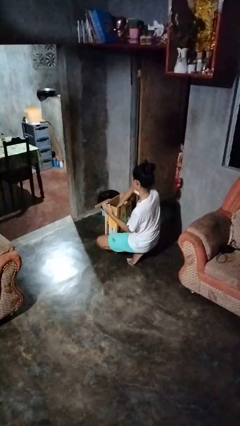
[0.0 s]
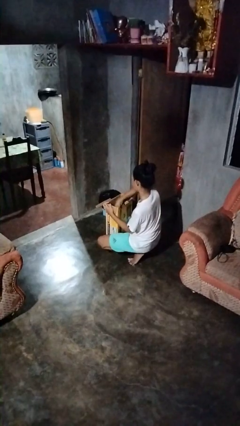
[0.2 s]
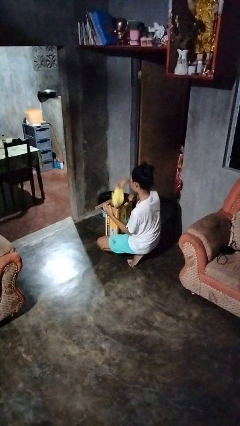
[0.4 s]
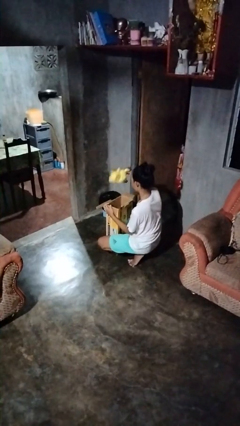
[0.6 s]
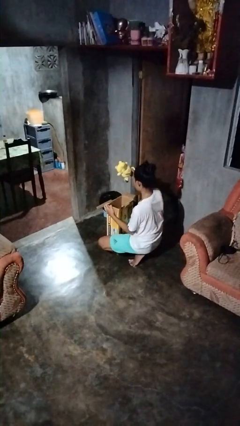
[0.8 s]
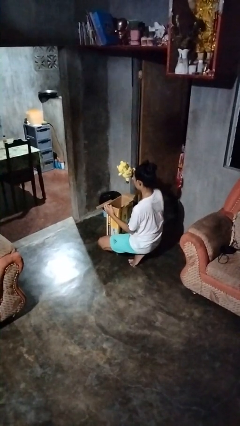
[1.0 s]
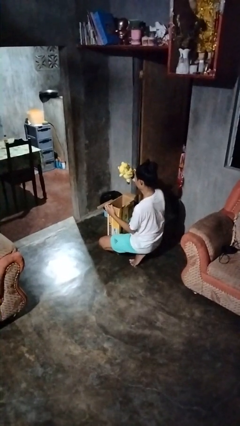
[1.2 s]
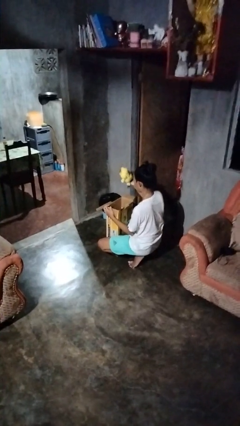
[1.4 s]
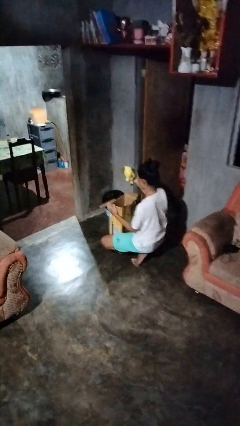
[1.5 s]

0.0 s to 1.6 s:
person takes object from box

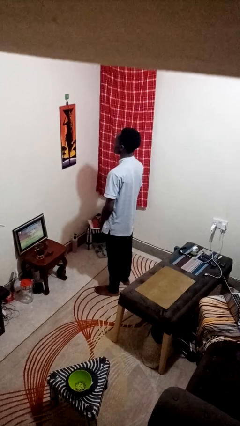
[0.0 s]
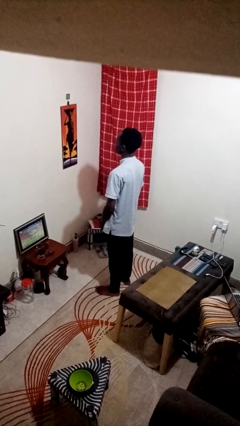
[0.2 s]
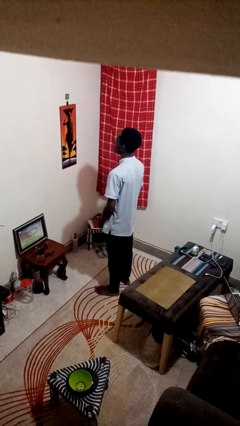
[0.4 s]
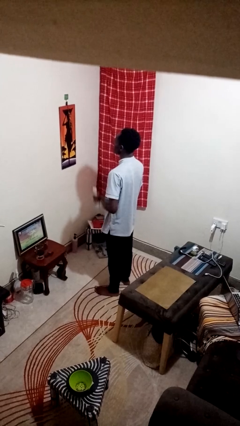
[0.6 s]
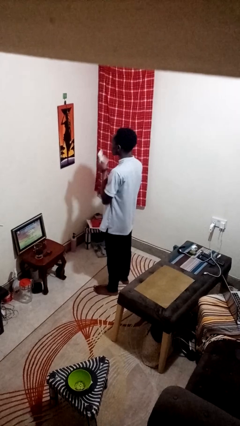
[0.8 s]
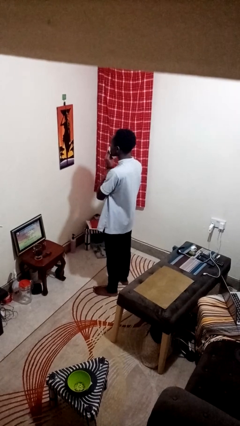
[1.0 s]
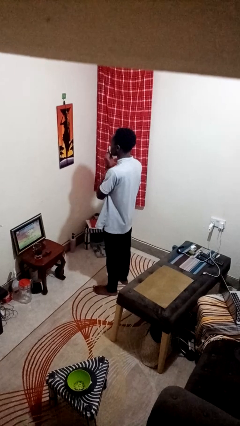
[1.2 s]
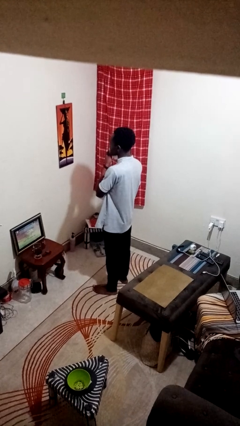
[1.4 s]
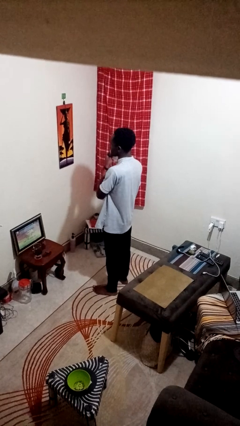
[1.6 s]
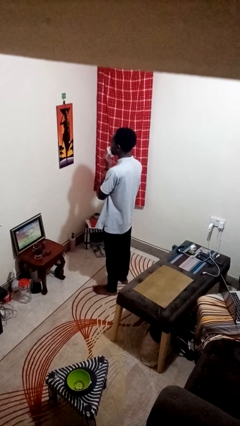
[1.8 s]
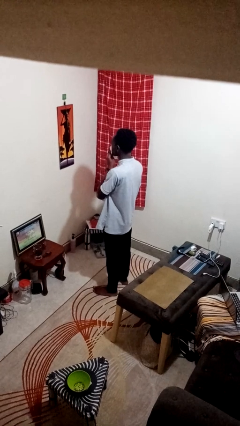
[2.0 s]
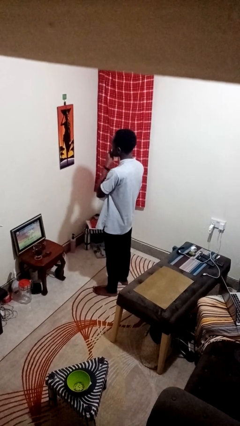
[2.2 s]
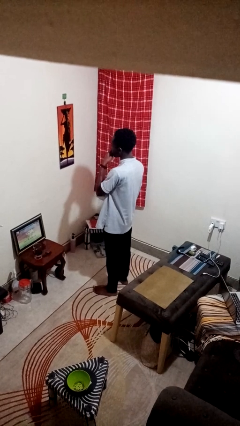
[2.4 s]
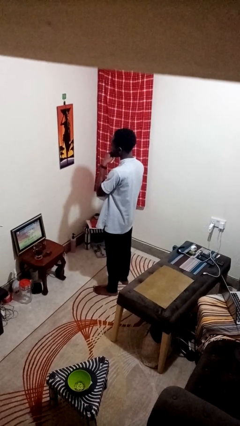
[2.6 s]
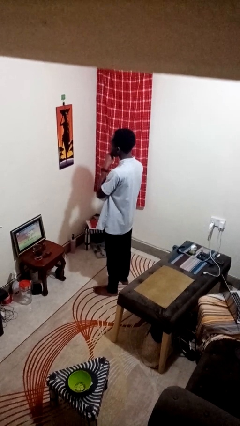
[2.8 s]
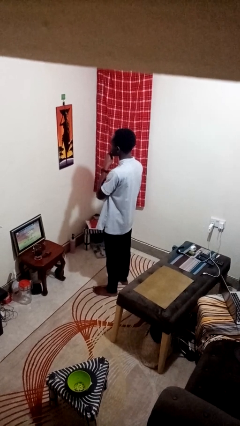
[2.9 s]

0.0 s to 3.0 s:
person wipes mouth with napkin

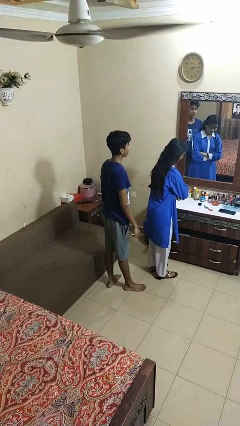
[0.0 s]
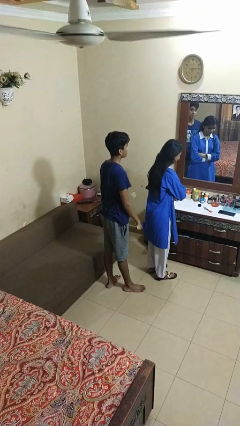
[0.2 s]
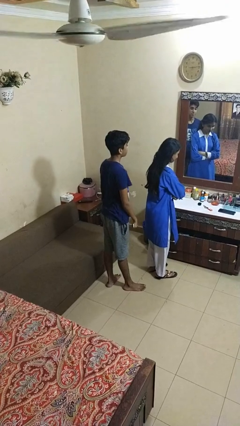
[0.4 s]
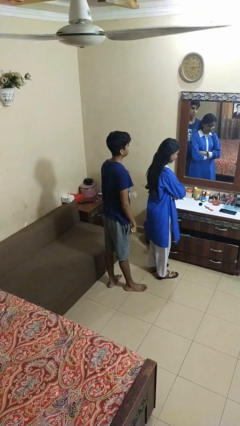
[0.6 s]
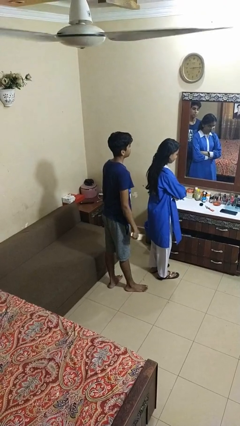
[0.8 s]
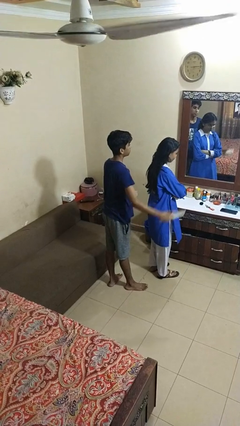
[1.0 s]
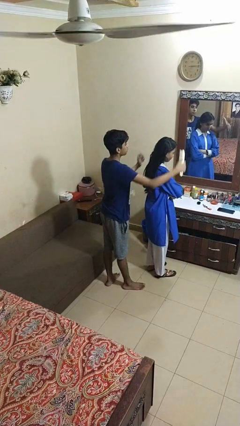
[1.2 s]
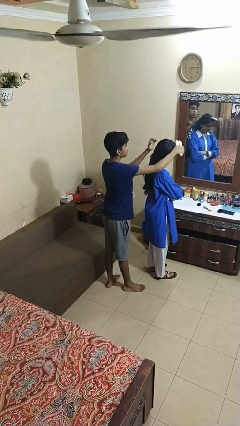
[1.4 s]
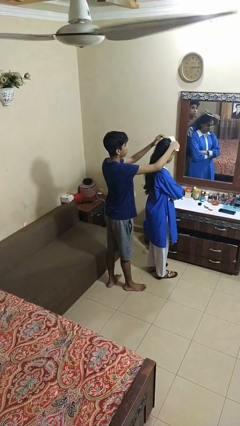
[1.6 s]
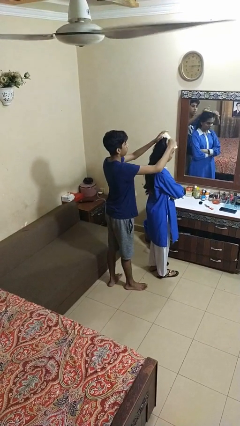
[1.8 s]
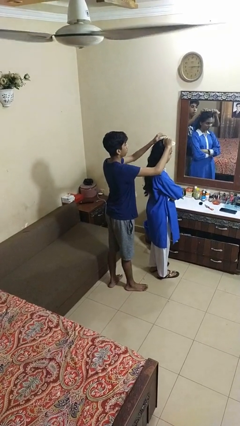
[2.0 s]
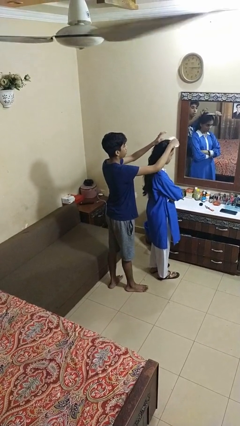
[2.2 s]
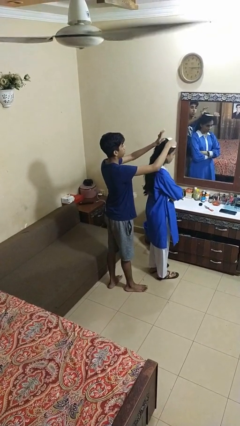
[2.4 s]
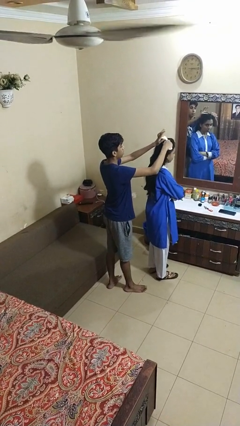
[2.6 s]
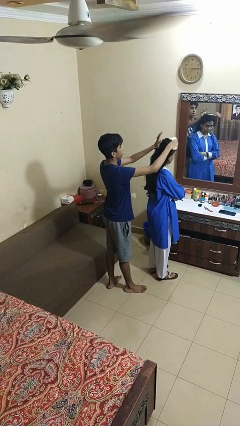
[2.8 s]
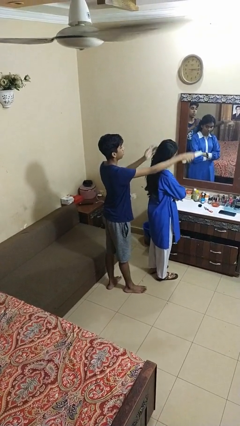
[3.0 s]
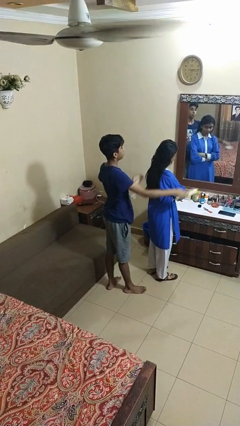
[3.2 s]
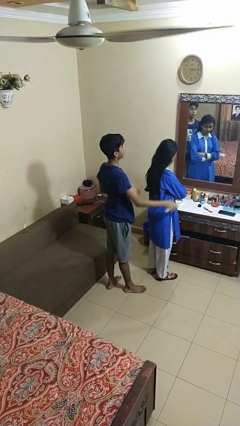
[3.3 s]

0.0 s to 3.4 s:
person brushes hair of person

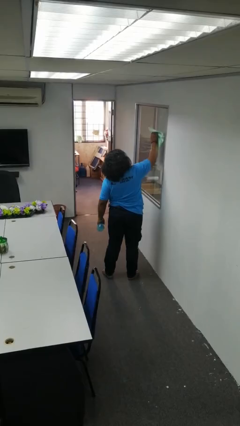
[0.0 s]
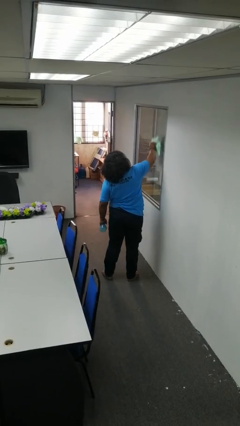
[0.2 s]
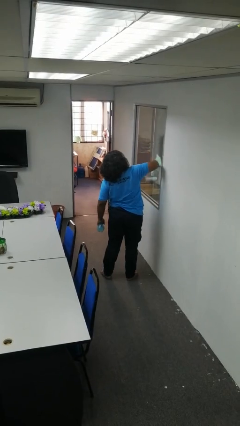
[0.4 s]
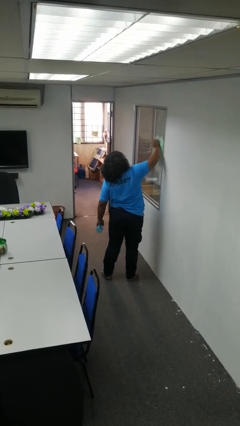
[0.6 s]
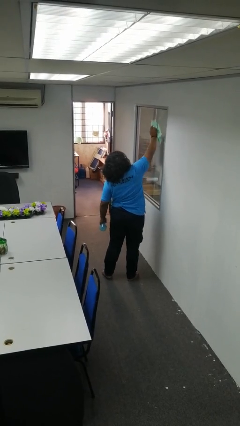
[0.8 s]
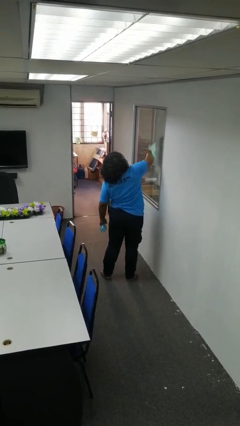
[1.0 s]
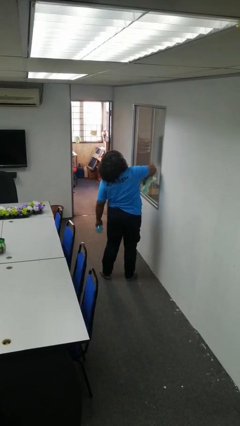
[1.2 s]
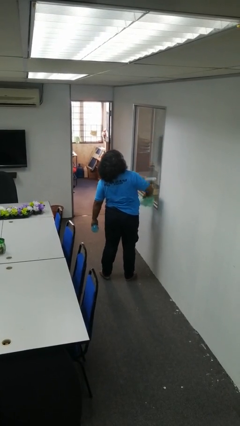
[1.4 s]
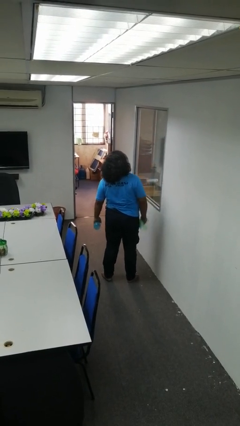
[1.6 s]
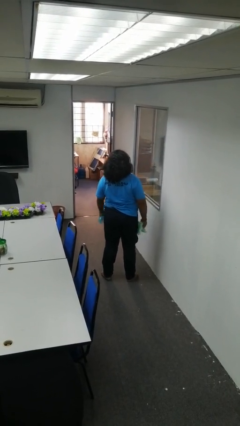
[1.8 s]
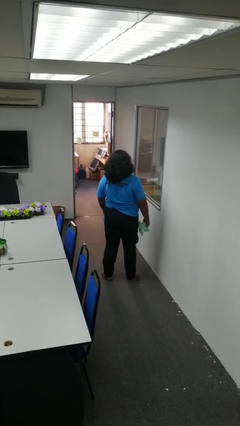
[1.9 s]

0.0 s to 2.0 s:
person washes window

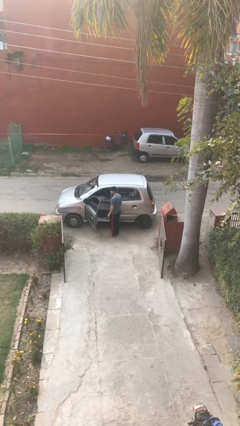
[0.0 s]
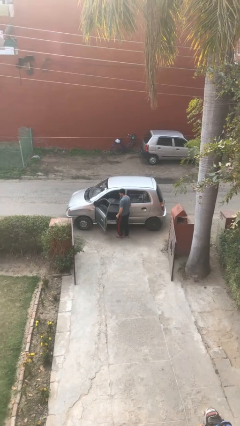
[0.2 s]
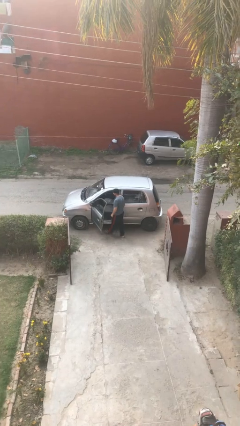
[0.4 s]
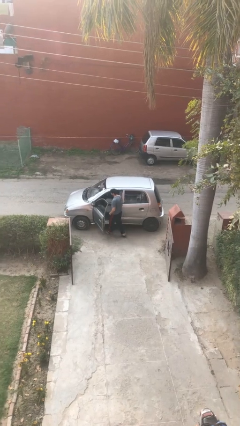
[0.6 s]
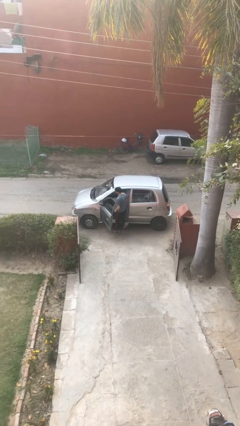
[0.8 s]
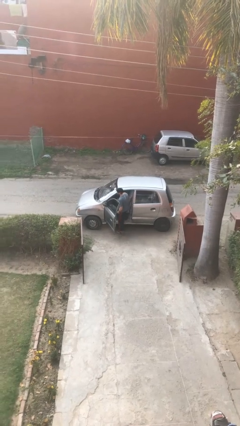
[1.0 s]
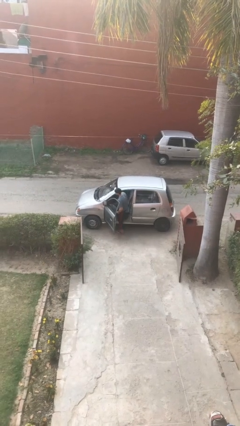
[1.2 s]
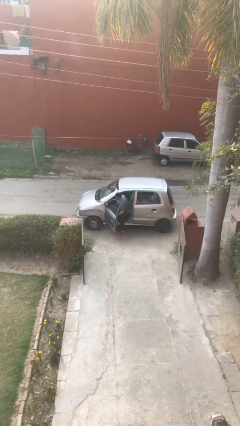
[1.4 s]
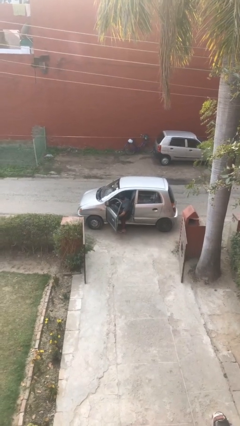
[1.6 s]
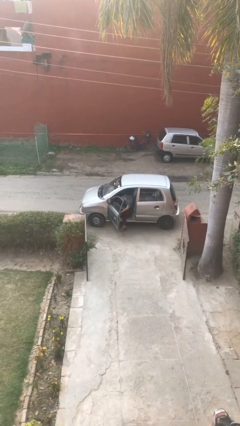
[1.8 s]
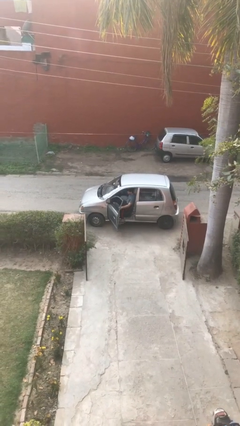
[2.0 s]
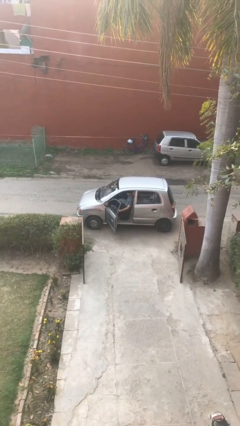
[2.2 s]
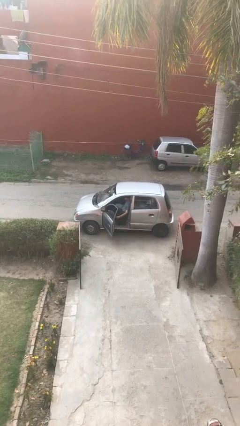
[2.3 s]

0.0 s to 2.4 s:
person enters car

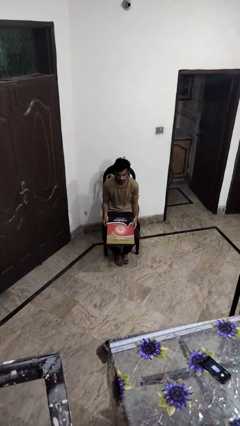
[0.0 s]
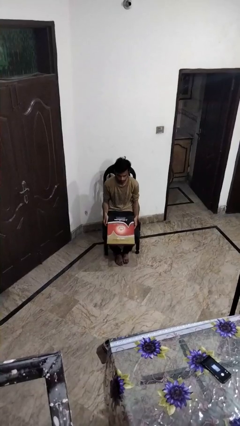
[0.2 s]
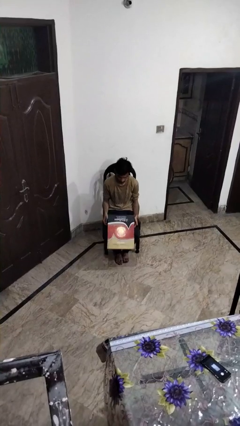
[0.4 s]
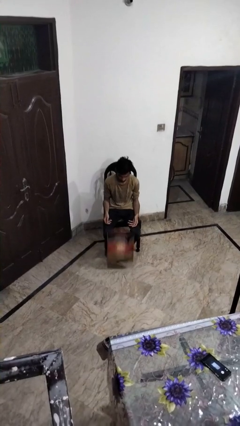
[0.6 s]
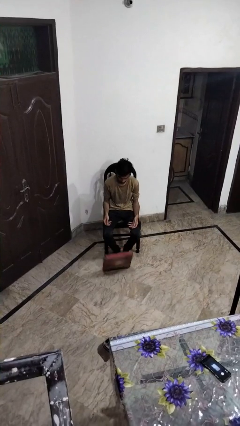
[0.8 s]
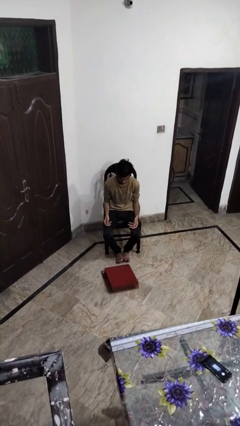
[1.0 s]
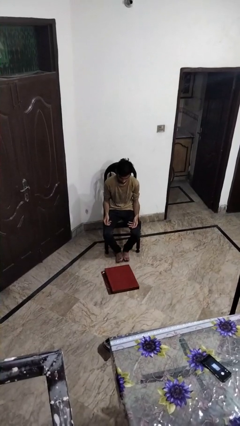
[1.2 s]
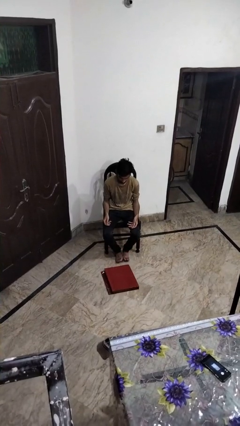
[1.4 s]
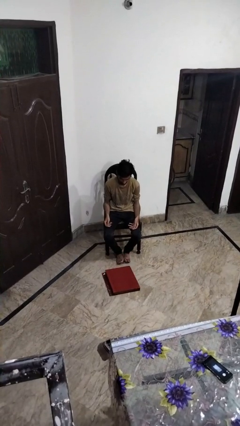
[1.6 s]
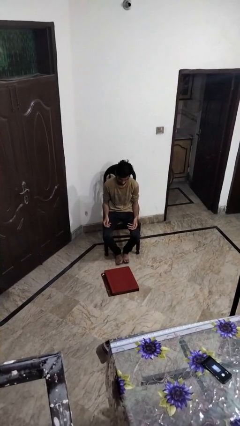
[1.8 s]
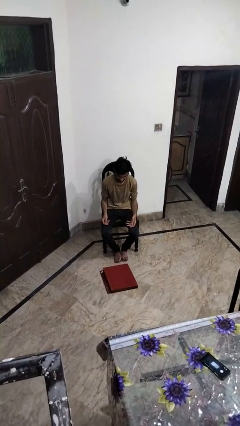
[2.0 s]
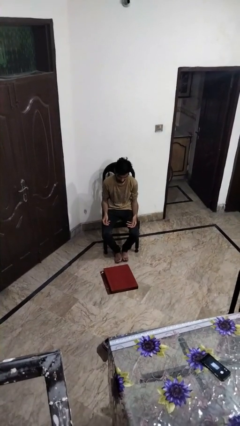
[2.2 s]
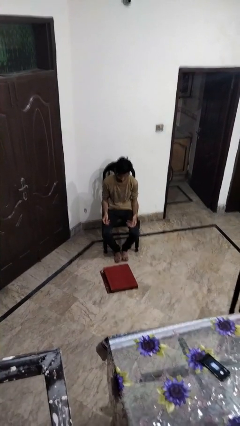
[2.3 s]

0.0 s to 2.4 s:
person drops object

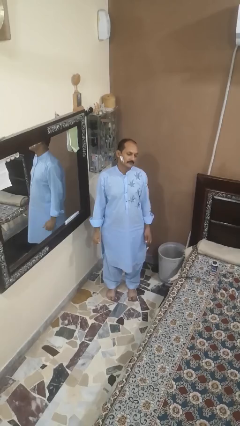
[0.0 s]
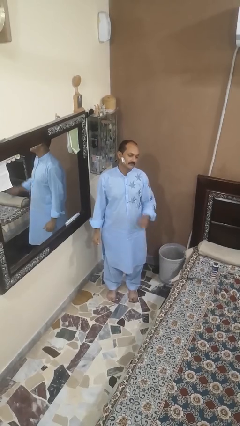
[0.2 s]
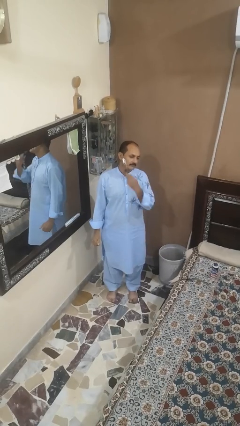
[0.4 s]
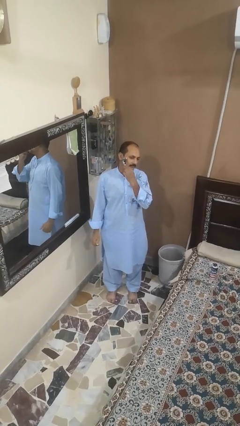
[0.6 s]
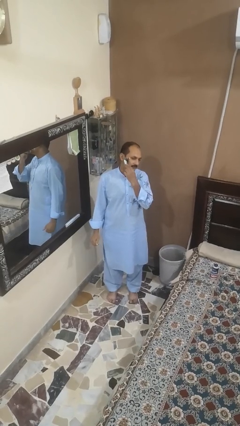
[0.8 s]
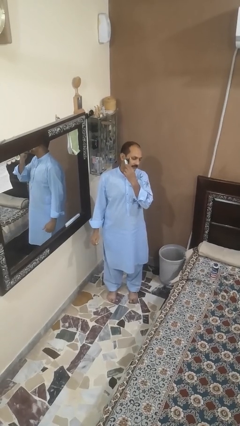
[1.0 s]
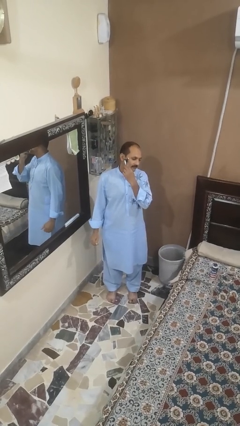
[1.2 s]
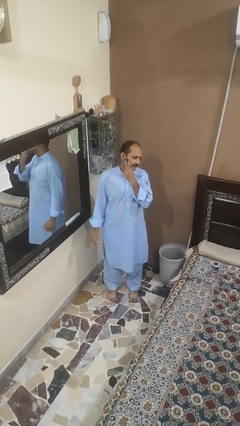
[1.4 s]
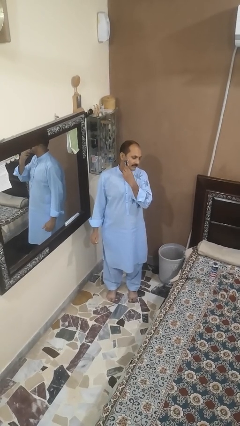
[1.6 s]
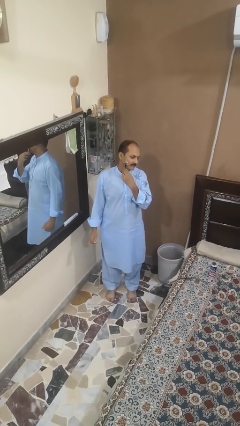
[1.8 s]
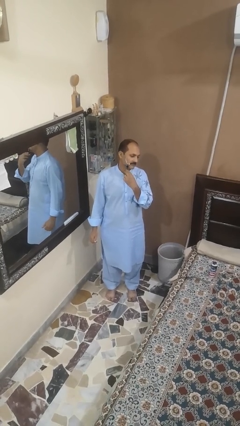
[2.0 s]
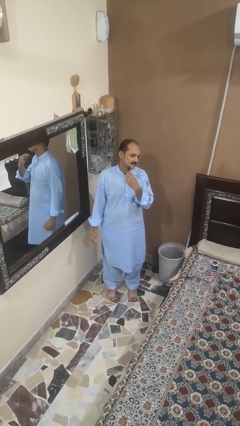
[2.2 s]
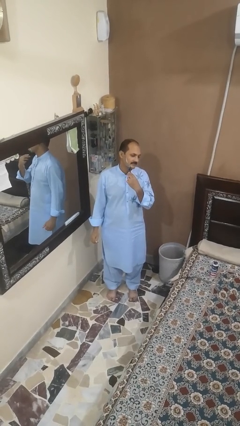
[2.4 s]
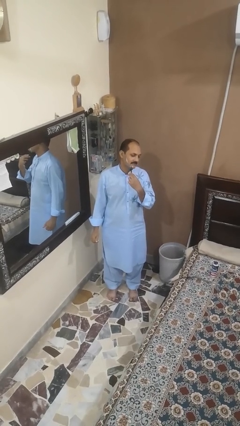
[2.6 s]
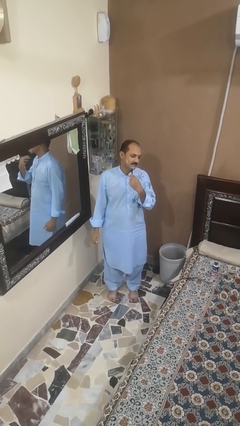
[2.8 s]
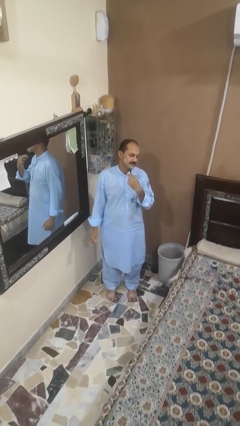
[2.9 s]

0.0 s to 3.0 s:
person shaves face
